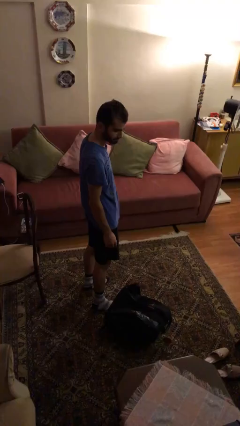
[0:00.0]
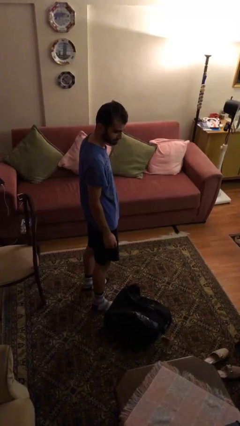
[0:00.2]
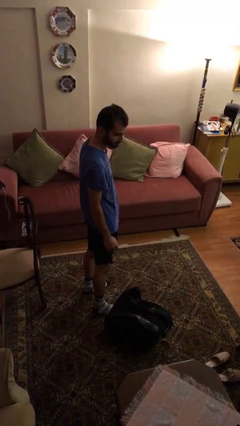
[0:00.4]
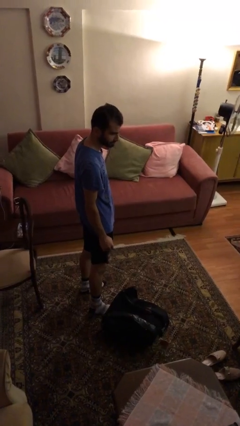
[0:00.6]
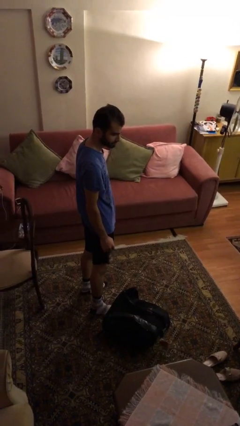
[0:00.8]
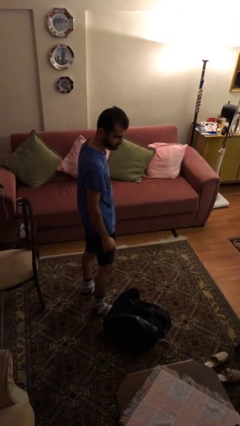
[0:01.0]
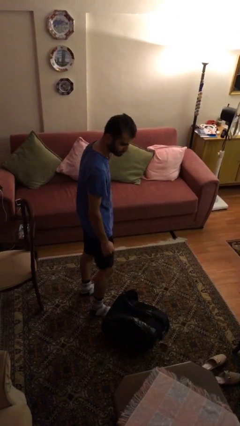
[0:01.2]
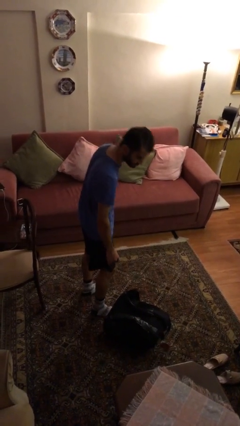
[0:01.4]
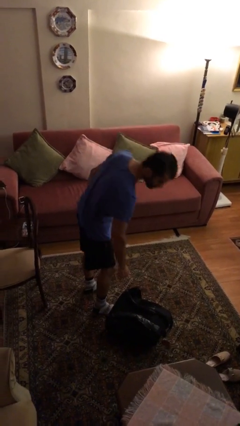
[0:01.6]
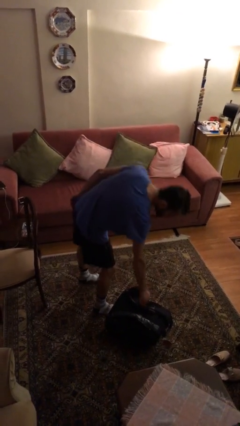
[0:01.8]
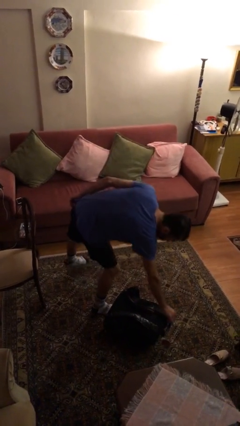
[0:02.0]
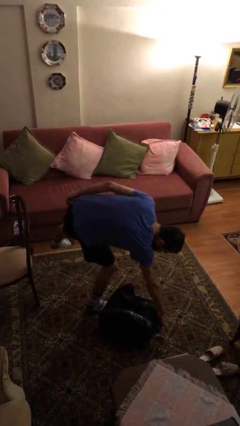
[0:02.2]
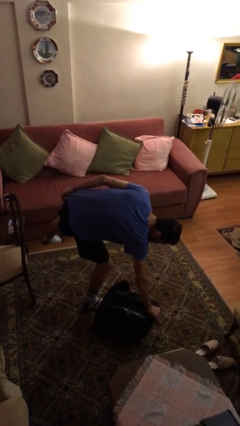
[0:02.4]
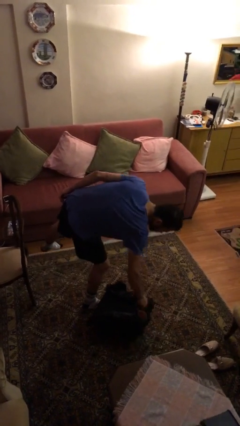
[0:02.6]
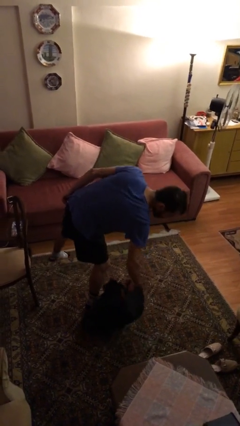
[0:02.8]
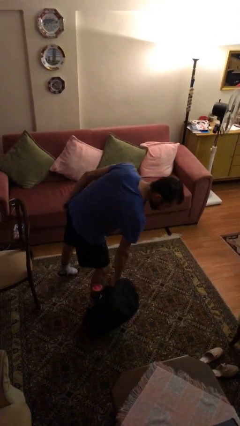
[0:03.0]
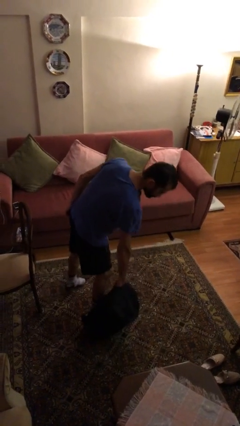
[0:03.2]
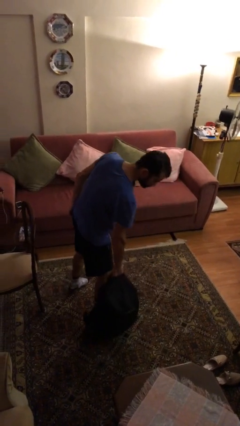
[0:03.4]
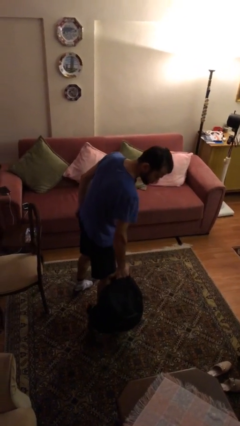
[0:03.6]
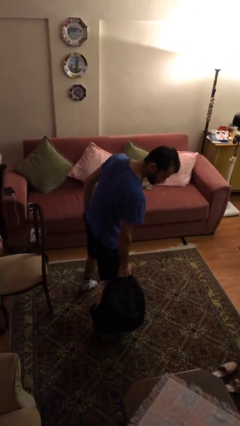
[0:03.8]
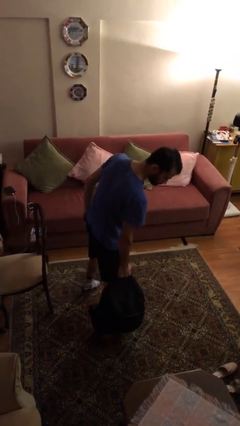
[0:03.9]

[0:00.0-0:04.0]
person picks up object from floor

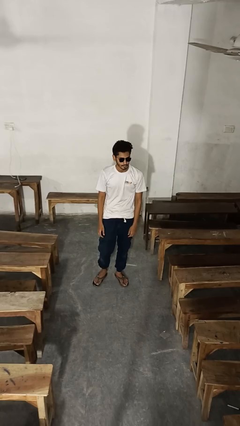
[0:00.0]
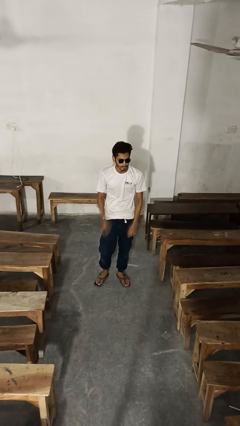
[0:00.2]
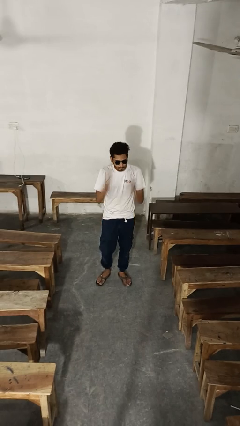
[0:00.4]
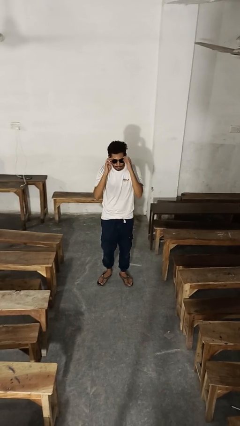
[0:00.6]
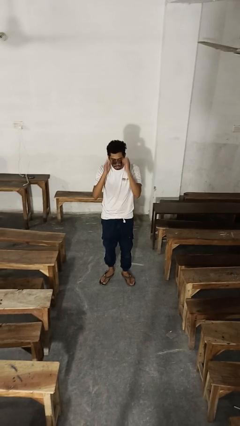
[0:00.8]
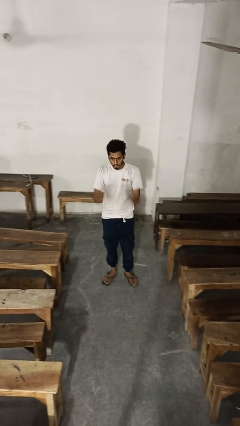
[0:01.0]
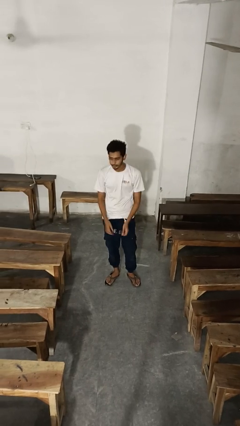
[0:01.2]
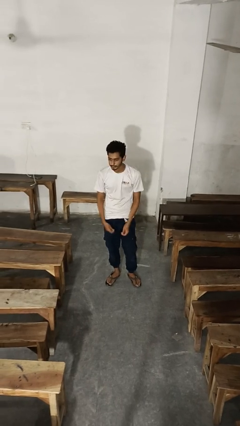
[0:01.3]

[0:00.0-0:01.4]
person takes off sunglasses

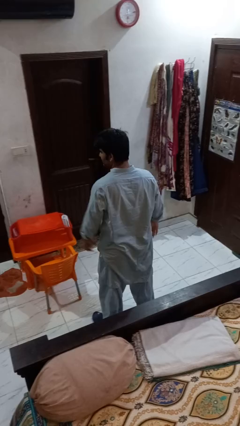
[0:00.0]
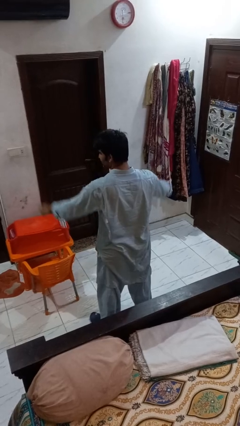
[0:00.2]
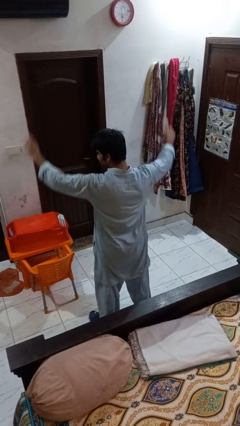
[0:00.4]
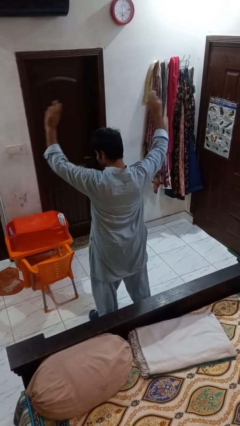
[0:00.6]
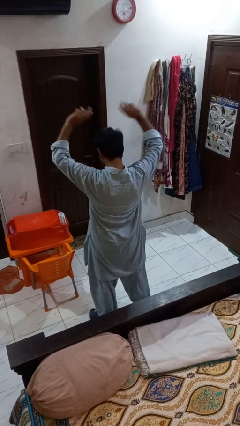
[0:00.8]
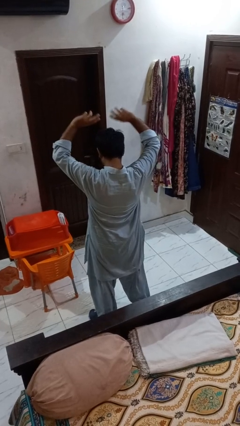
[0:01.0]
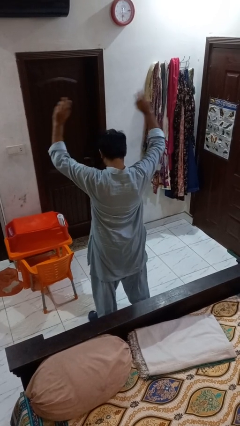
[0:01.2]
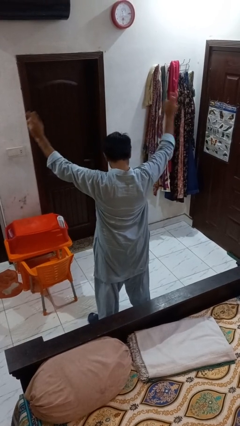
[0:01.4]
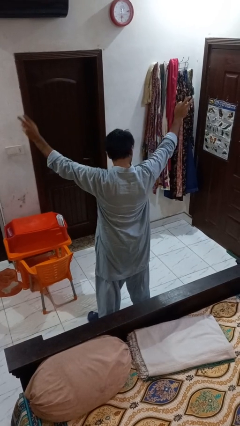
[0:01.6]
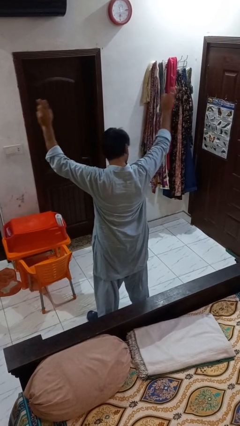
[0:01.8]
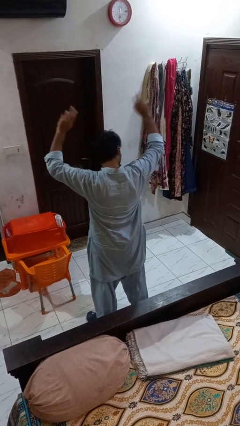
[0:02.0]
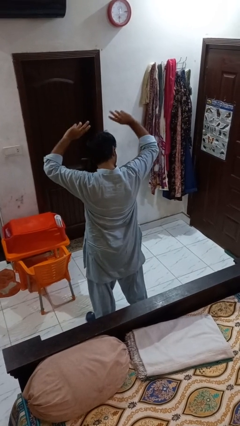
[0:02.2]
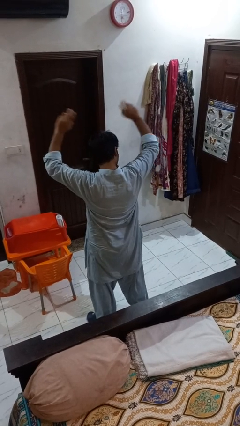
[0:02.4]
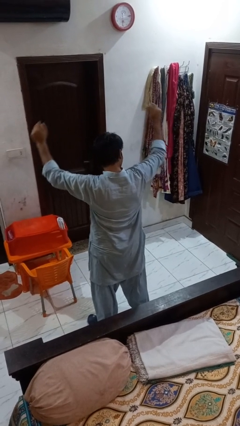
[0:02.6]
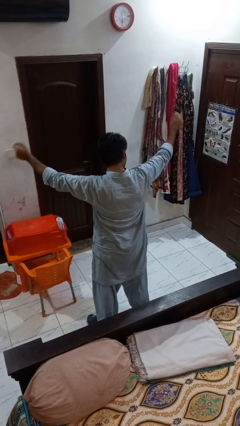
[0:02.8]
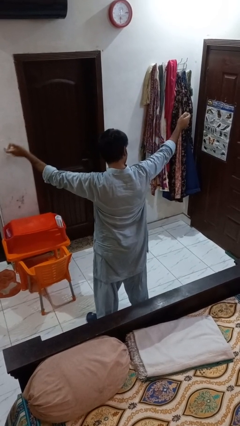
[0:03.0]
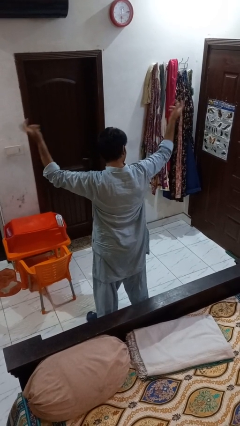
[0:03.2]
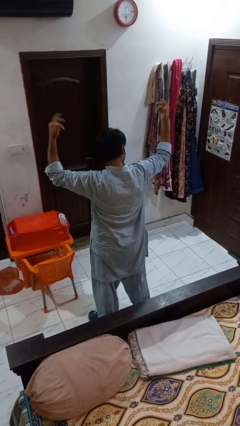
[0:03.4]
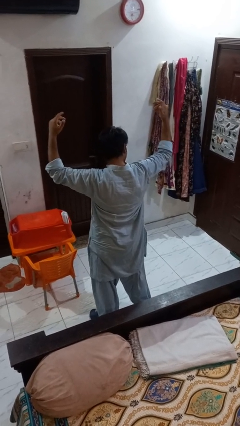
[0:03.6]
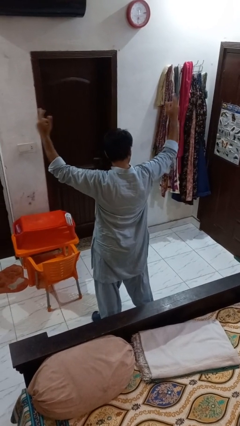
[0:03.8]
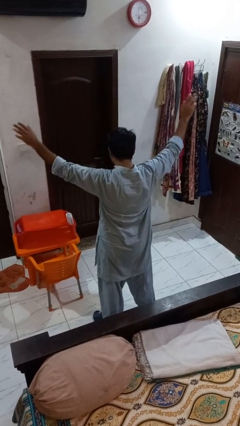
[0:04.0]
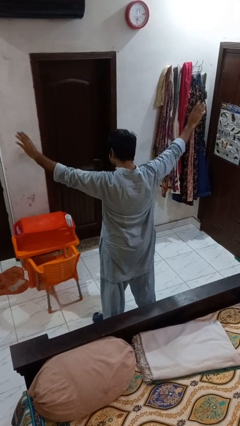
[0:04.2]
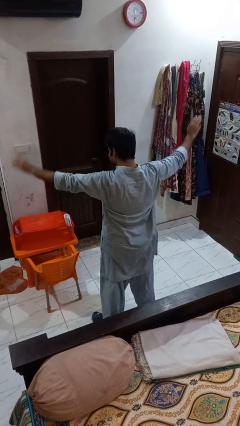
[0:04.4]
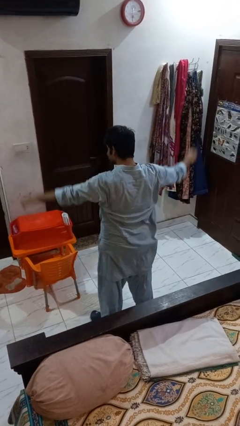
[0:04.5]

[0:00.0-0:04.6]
person dances in place

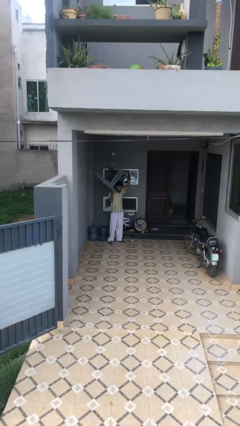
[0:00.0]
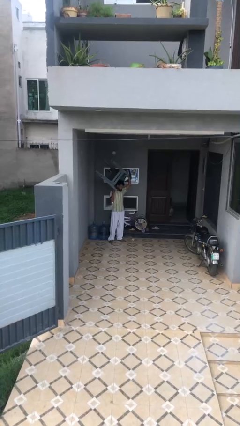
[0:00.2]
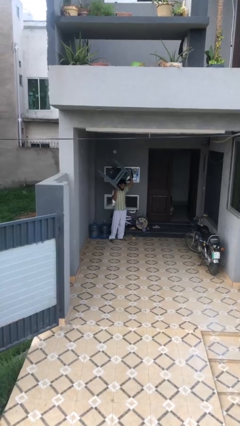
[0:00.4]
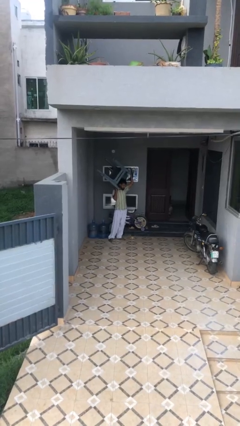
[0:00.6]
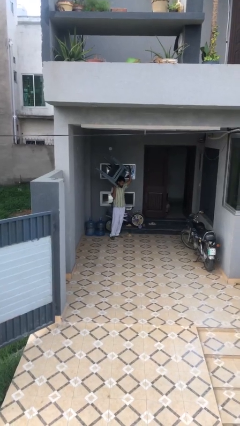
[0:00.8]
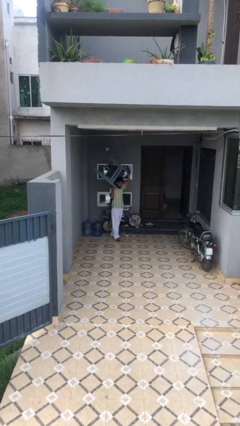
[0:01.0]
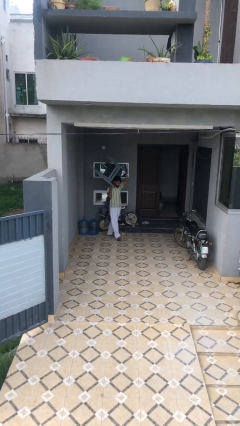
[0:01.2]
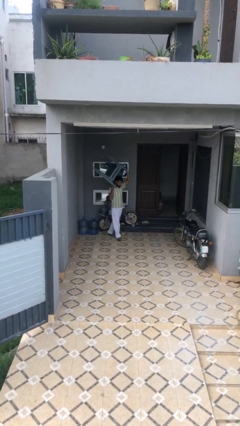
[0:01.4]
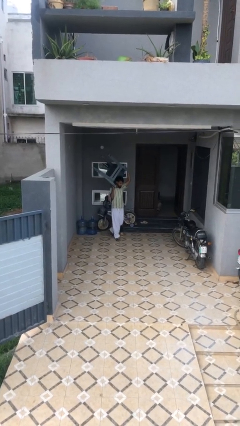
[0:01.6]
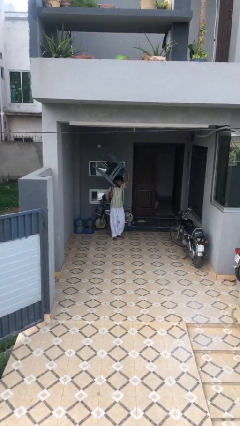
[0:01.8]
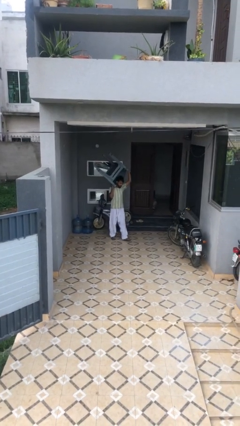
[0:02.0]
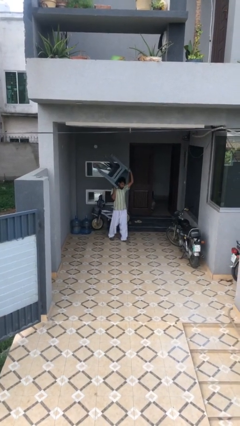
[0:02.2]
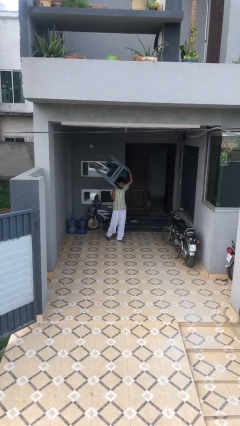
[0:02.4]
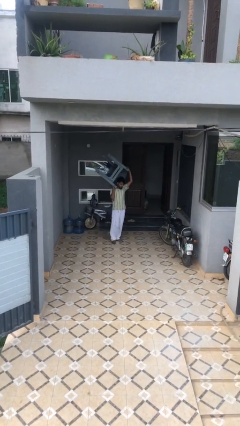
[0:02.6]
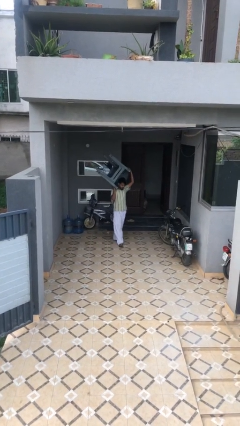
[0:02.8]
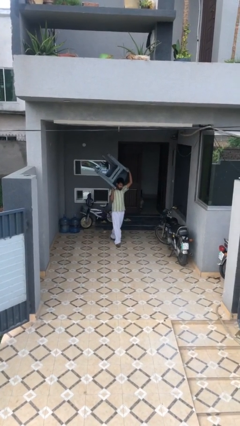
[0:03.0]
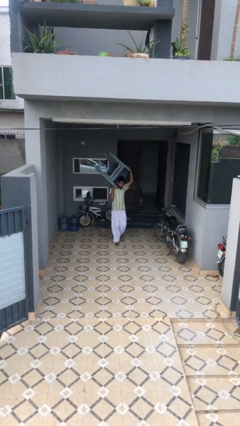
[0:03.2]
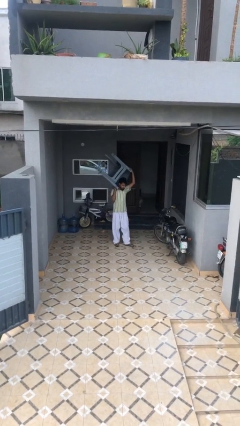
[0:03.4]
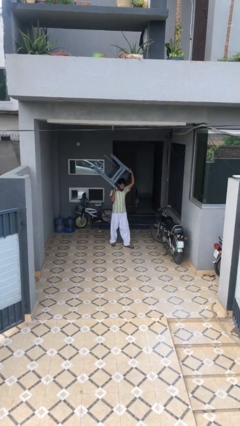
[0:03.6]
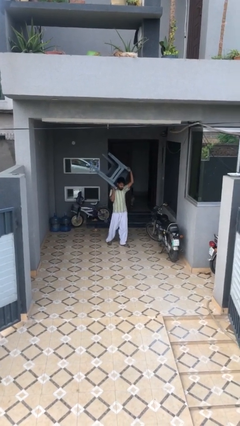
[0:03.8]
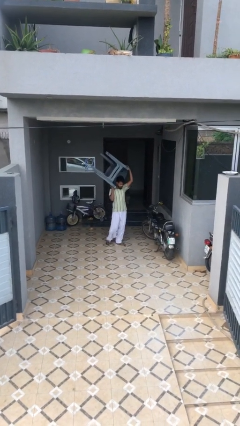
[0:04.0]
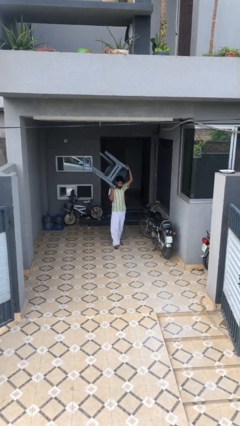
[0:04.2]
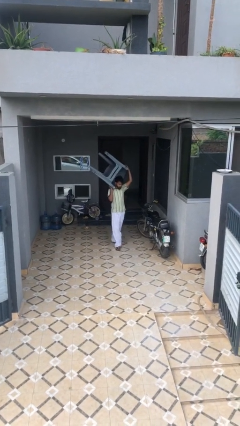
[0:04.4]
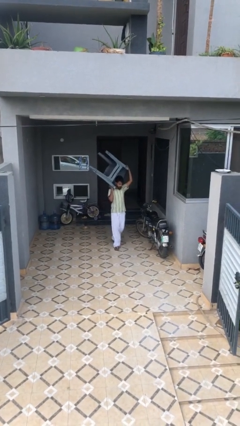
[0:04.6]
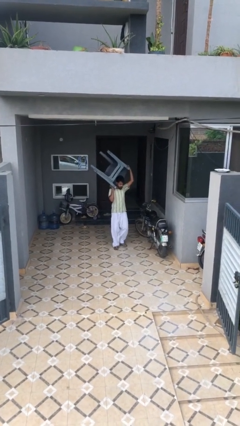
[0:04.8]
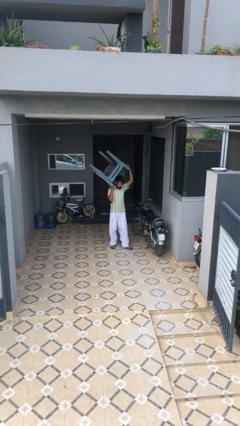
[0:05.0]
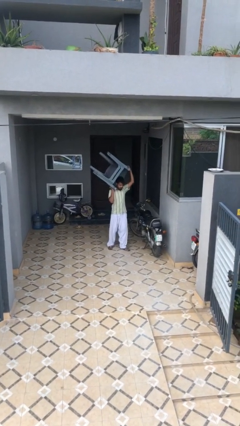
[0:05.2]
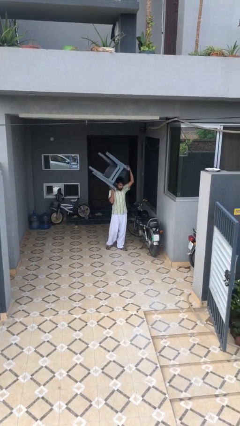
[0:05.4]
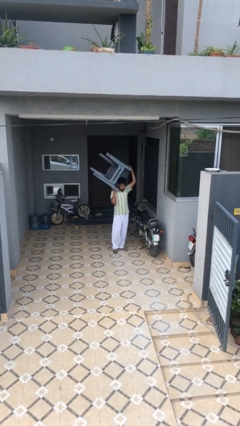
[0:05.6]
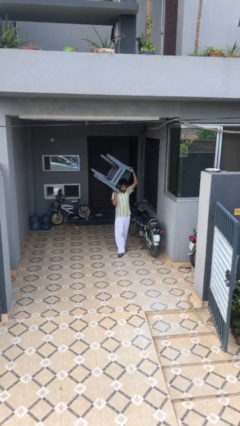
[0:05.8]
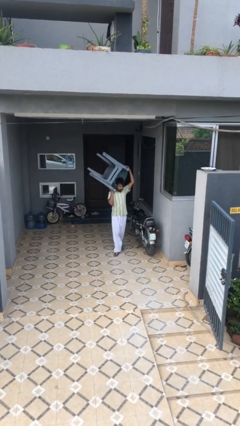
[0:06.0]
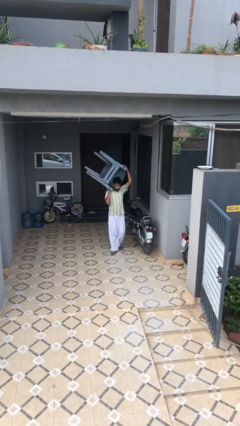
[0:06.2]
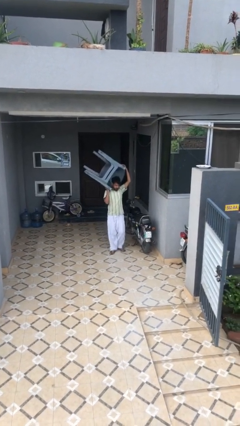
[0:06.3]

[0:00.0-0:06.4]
person carries heavy object

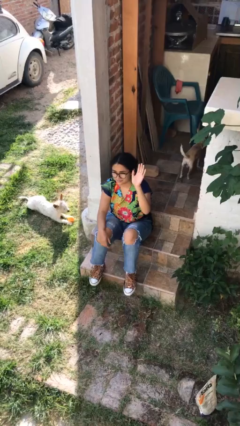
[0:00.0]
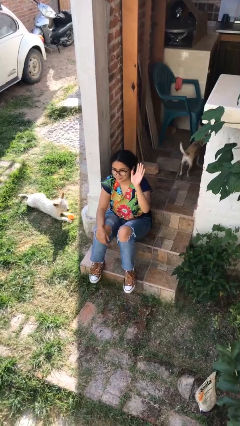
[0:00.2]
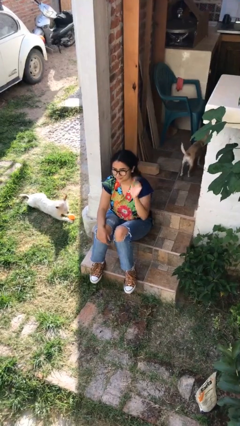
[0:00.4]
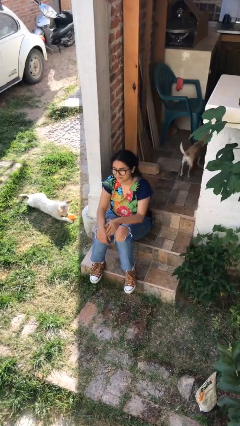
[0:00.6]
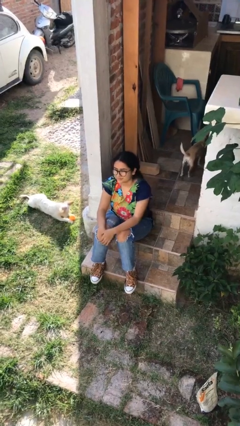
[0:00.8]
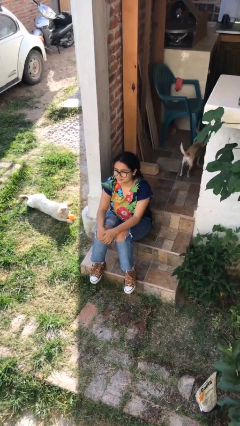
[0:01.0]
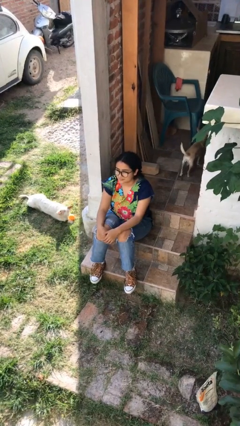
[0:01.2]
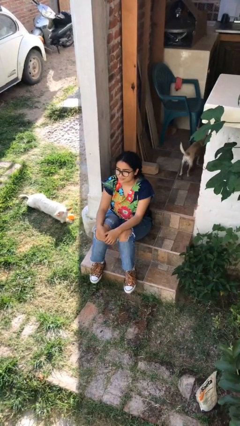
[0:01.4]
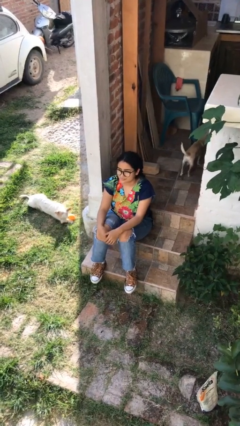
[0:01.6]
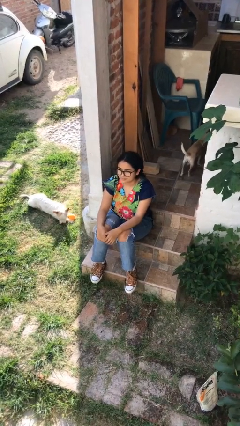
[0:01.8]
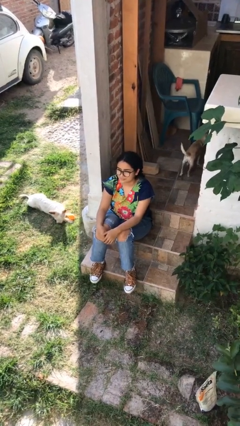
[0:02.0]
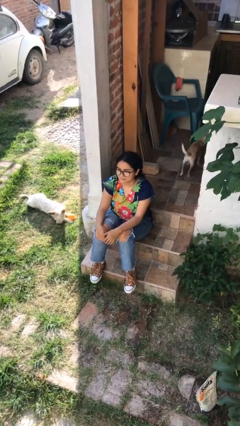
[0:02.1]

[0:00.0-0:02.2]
person gestures lower hand
